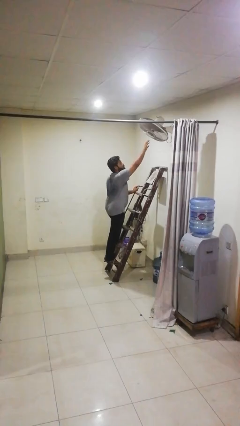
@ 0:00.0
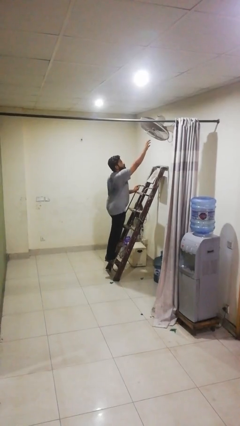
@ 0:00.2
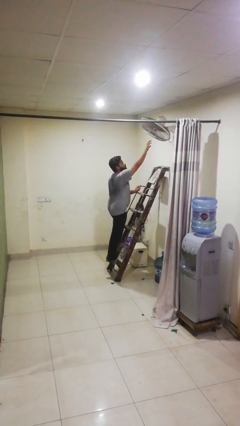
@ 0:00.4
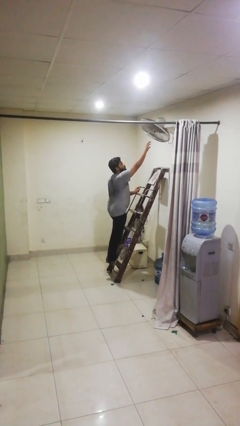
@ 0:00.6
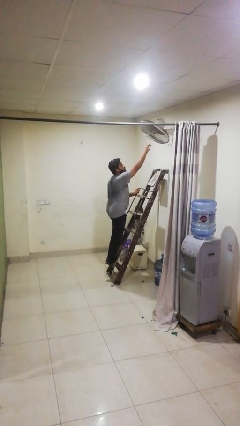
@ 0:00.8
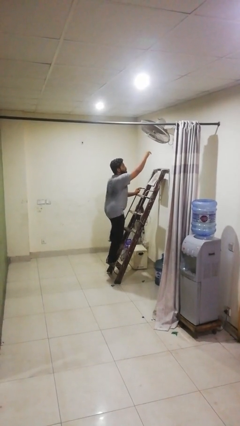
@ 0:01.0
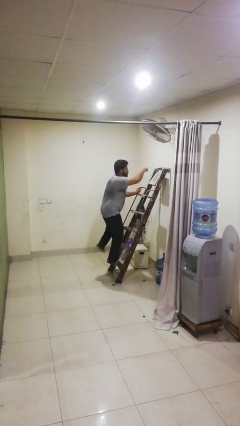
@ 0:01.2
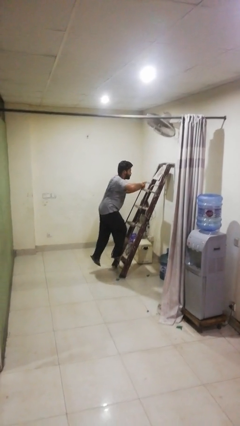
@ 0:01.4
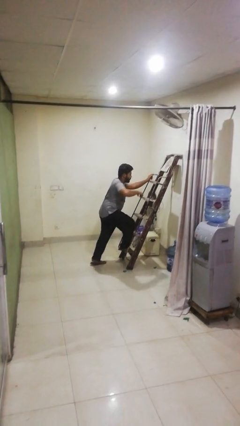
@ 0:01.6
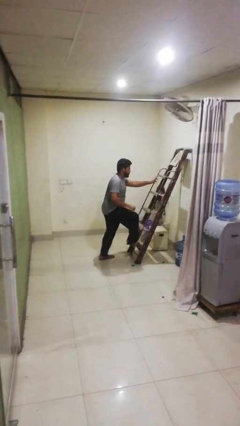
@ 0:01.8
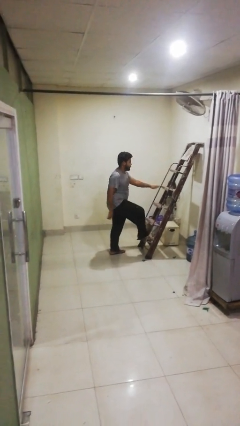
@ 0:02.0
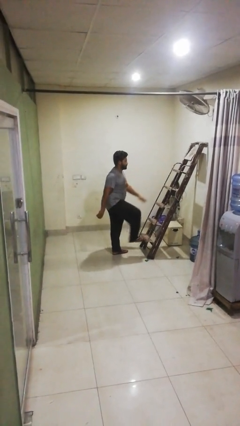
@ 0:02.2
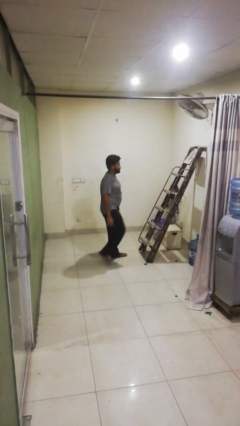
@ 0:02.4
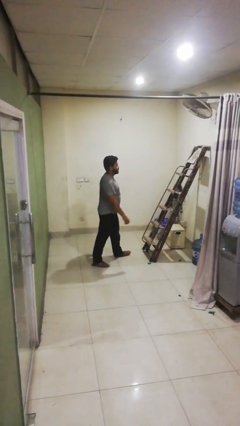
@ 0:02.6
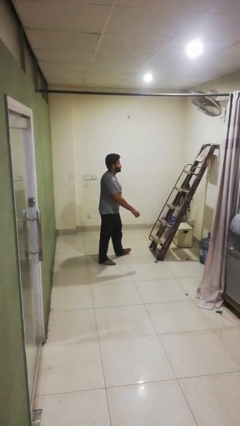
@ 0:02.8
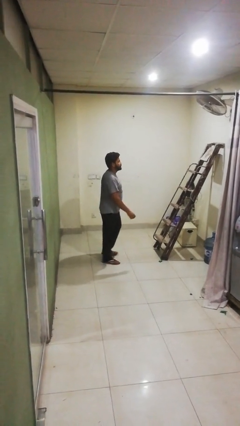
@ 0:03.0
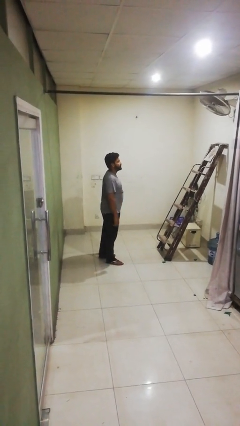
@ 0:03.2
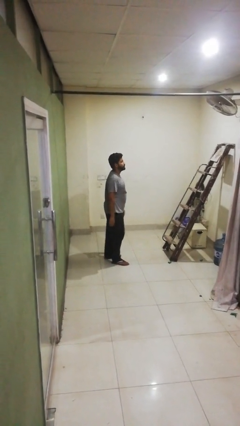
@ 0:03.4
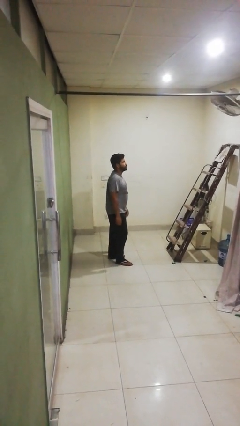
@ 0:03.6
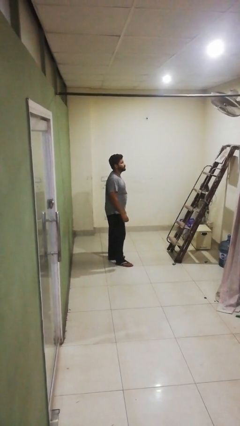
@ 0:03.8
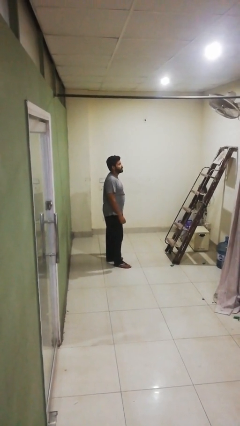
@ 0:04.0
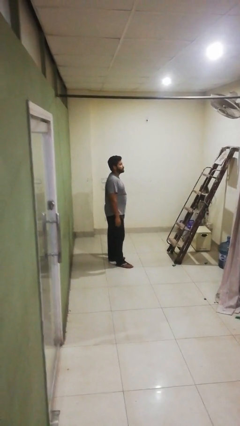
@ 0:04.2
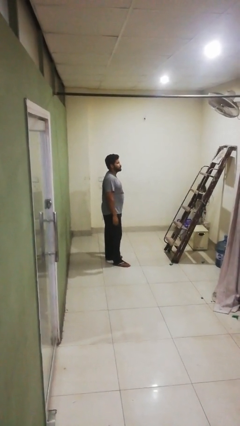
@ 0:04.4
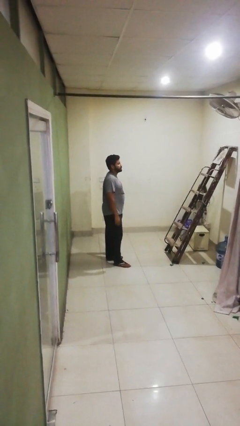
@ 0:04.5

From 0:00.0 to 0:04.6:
person climbs down ladder

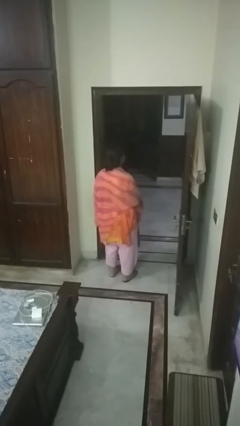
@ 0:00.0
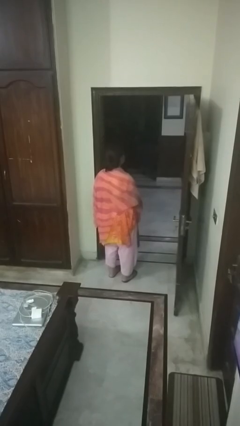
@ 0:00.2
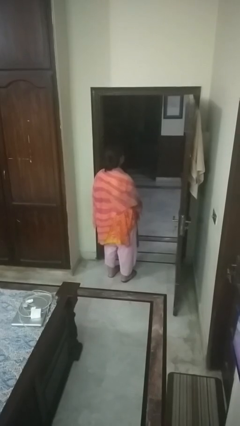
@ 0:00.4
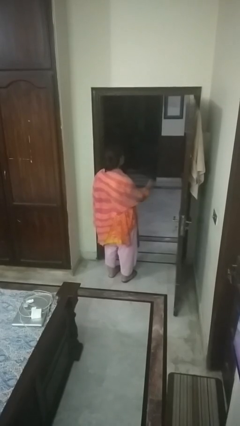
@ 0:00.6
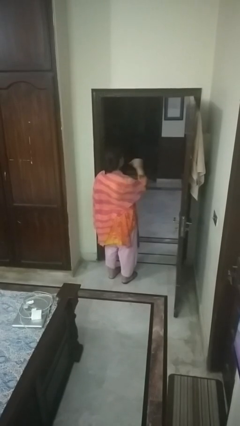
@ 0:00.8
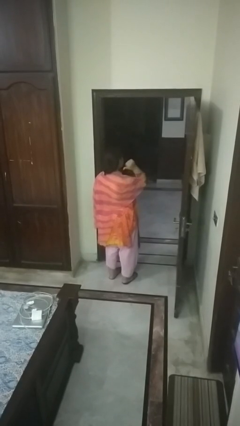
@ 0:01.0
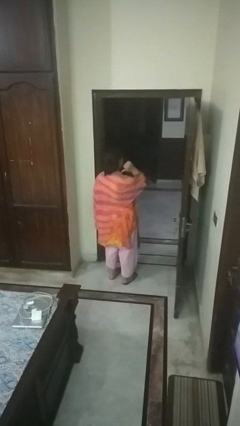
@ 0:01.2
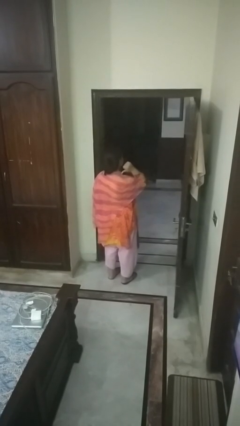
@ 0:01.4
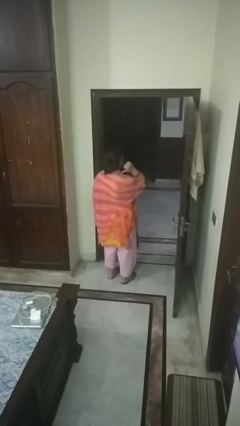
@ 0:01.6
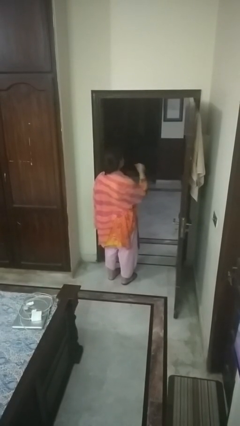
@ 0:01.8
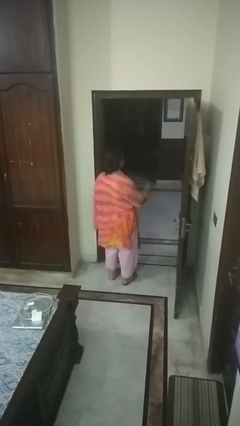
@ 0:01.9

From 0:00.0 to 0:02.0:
person gestures behind me

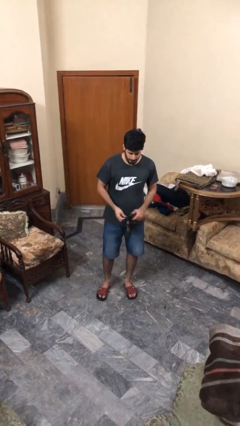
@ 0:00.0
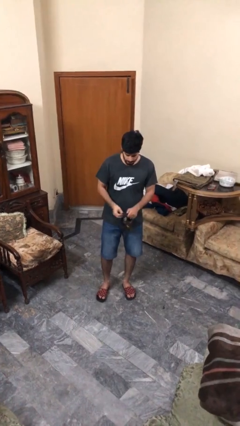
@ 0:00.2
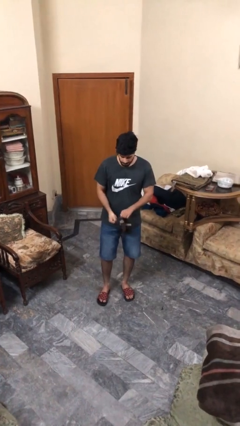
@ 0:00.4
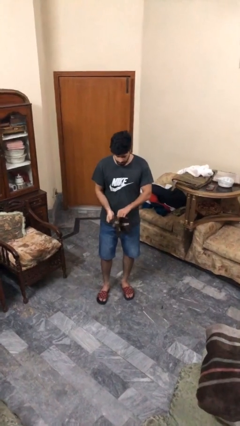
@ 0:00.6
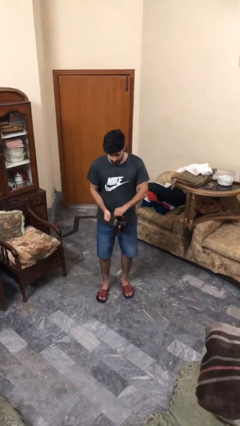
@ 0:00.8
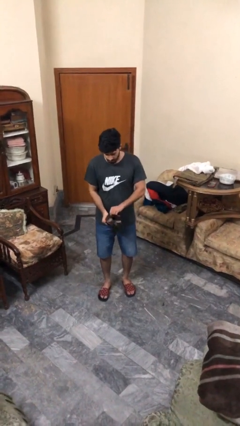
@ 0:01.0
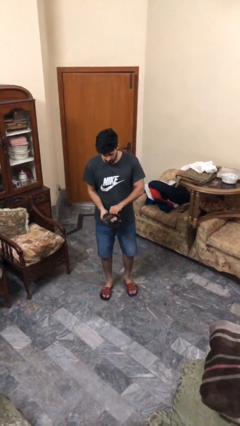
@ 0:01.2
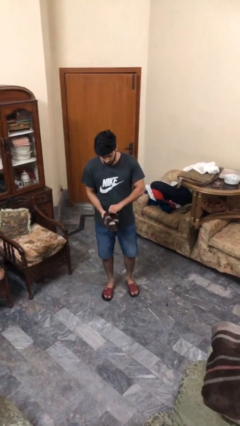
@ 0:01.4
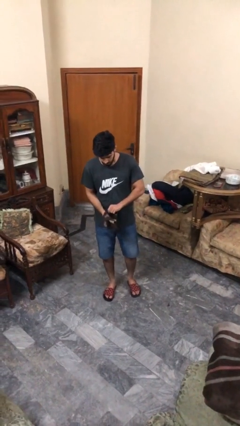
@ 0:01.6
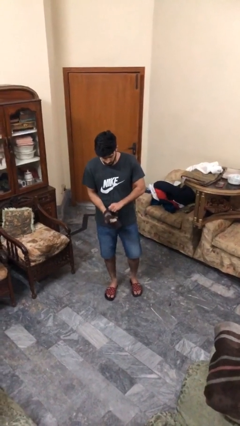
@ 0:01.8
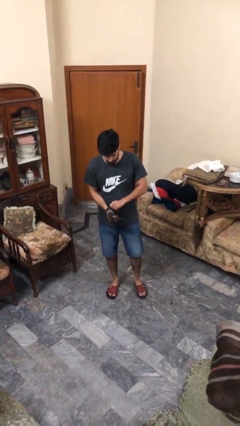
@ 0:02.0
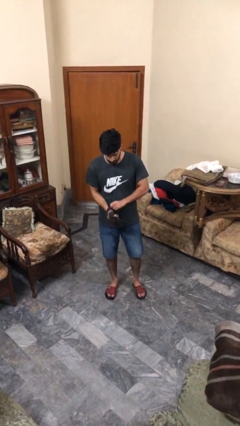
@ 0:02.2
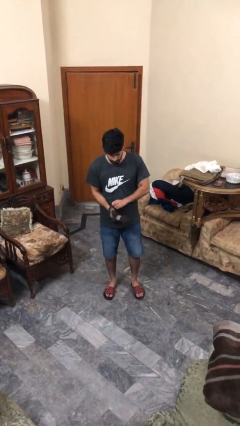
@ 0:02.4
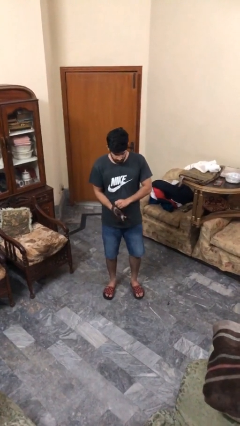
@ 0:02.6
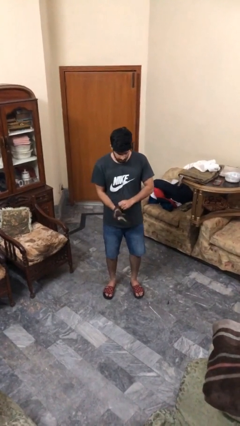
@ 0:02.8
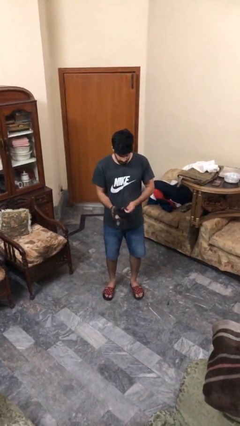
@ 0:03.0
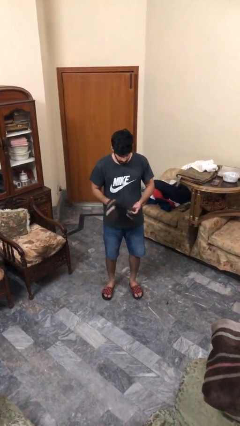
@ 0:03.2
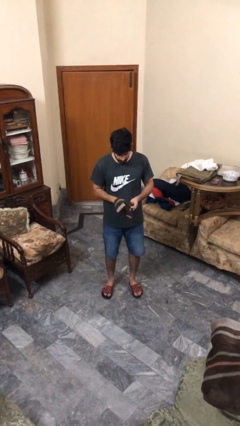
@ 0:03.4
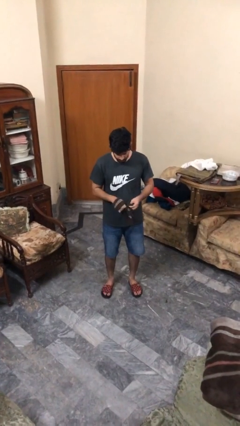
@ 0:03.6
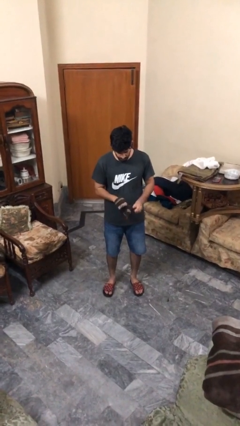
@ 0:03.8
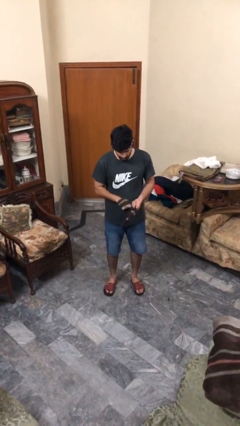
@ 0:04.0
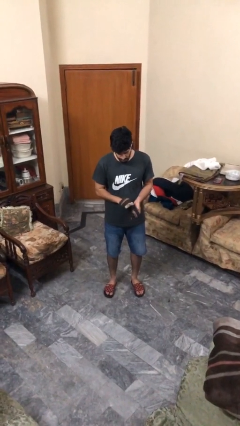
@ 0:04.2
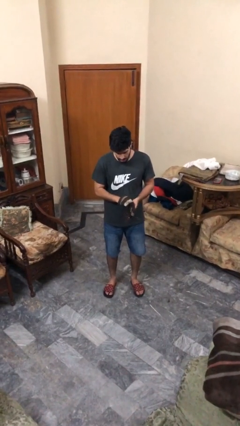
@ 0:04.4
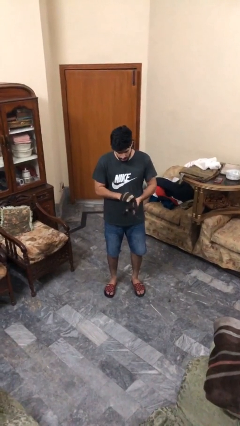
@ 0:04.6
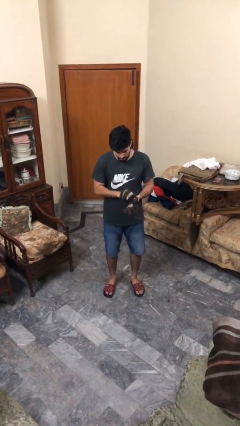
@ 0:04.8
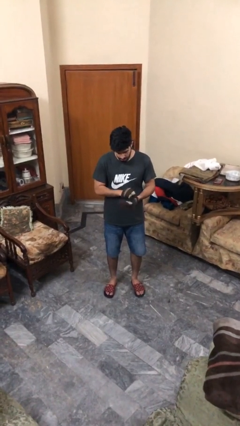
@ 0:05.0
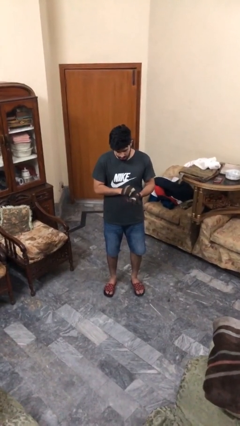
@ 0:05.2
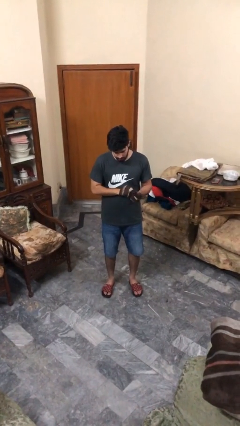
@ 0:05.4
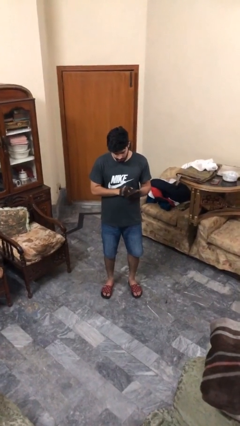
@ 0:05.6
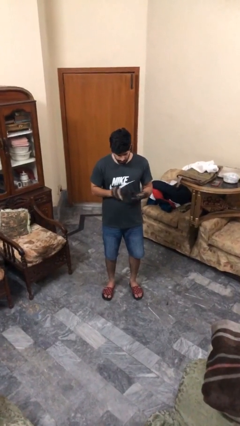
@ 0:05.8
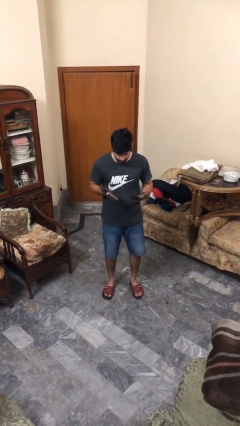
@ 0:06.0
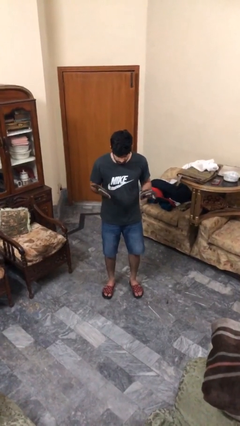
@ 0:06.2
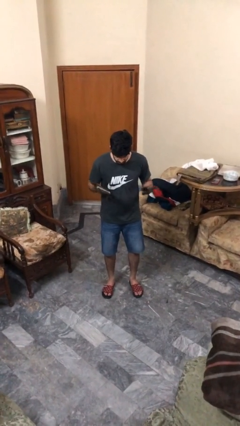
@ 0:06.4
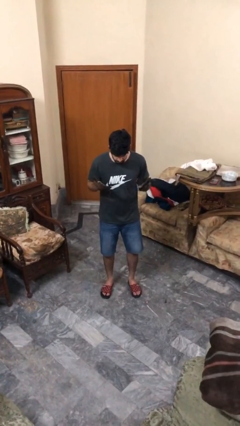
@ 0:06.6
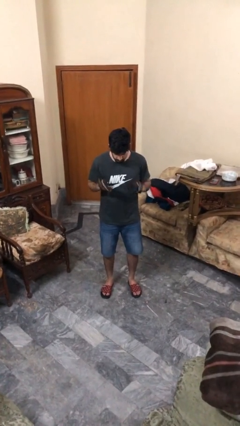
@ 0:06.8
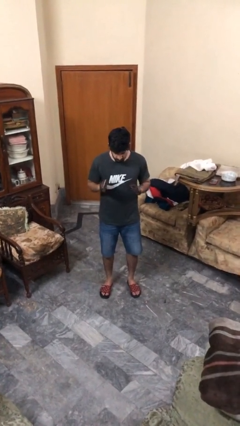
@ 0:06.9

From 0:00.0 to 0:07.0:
person puts on gloves

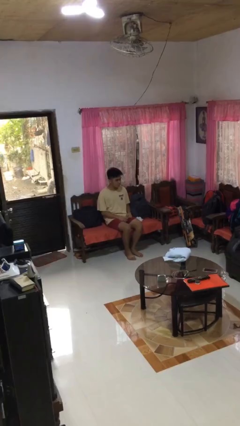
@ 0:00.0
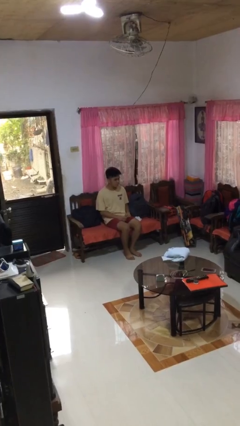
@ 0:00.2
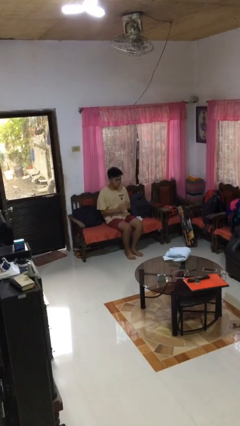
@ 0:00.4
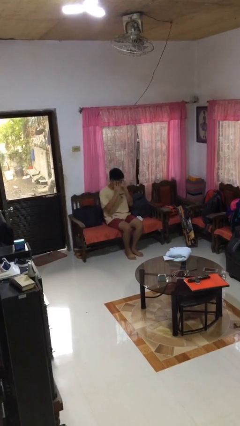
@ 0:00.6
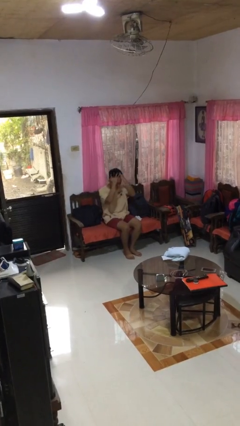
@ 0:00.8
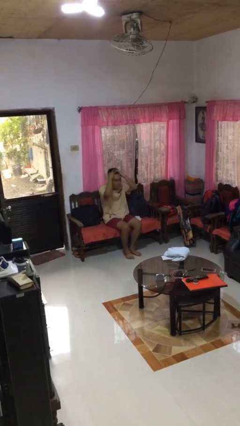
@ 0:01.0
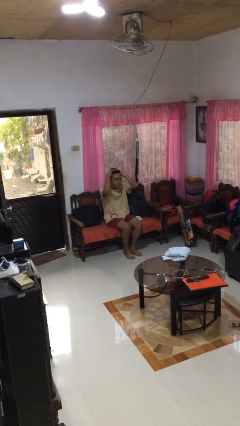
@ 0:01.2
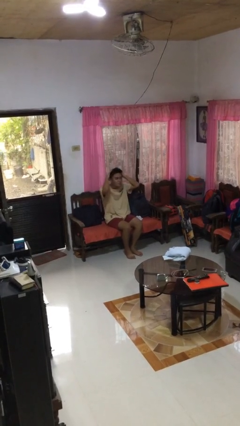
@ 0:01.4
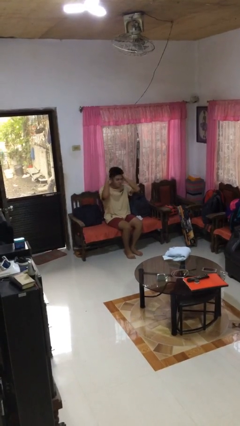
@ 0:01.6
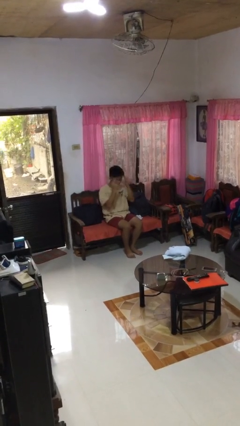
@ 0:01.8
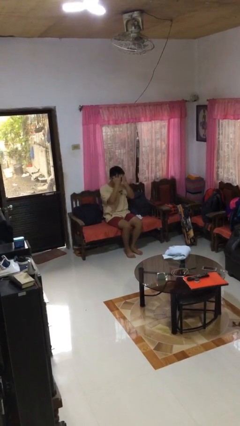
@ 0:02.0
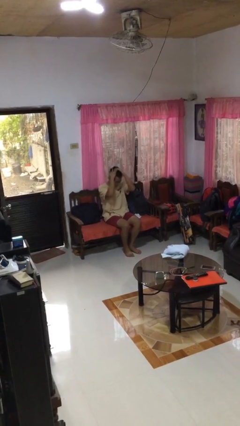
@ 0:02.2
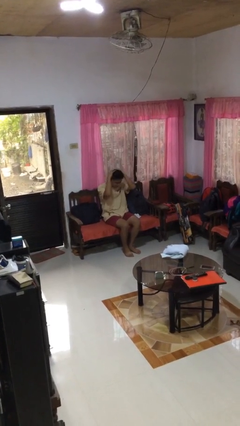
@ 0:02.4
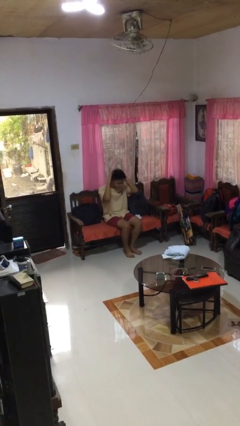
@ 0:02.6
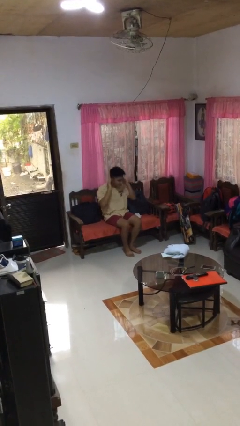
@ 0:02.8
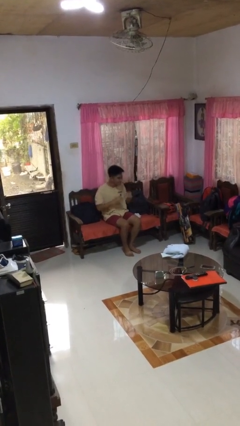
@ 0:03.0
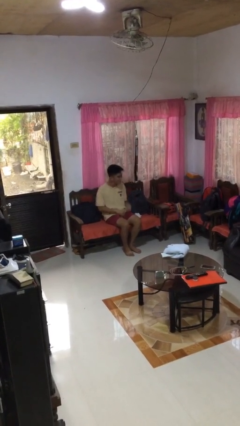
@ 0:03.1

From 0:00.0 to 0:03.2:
person strokes hair

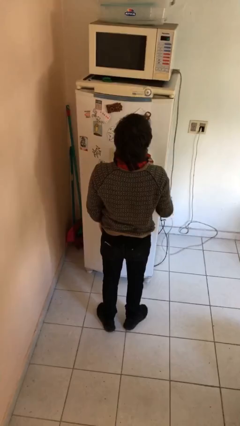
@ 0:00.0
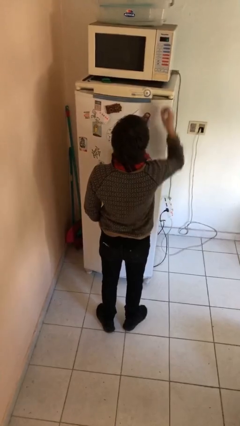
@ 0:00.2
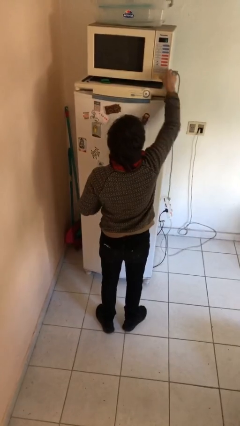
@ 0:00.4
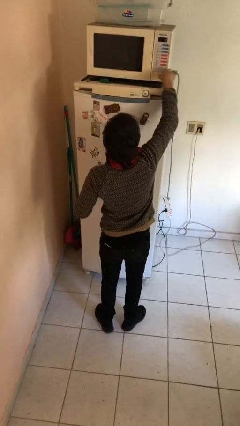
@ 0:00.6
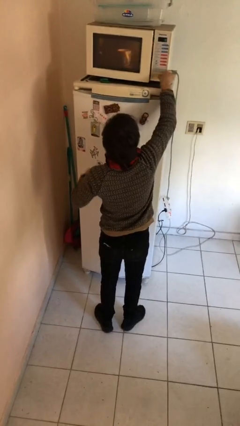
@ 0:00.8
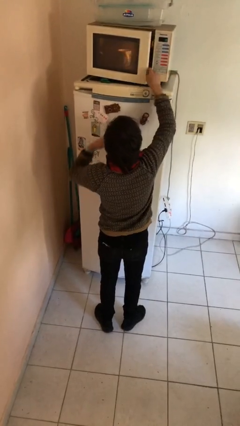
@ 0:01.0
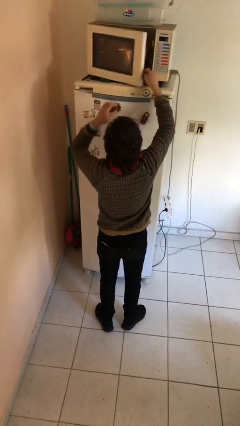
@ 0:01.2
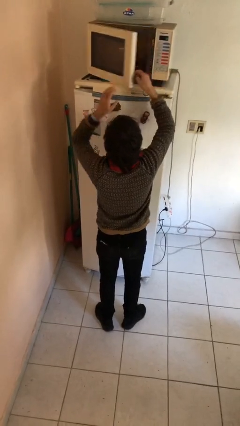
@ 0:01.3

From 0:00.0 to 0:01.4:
person opens microwave
